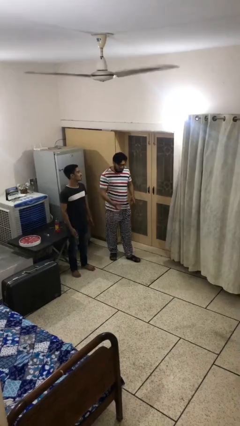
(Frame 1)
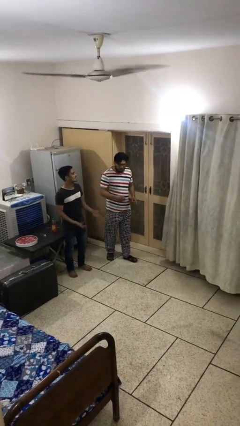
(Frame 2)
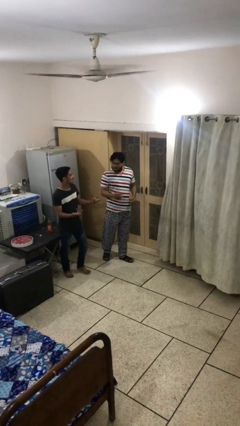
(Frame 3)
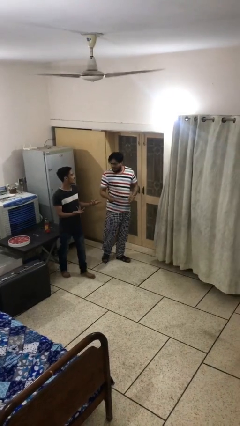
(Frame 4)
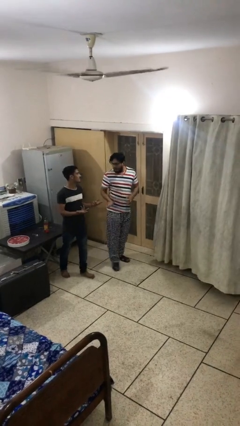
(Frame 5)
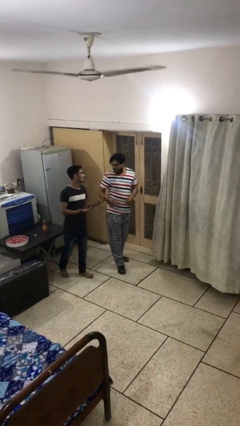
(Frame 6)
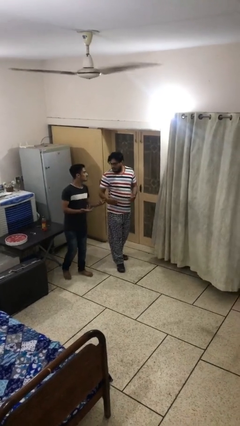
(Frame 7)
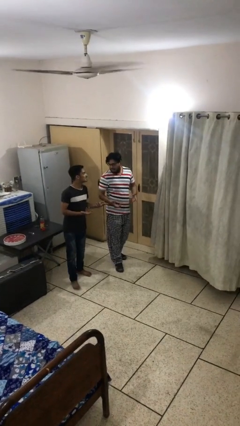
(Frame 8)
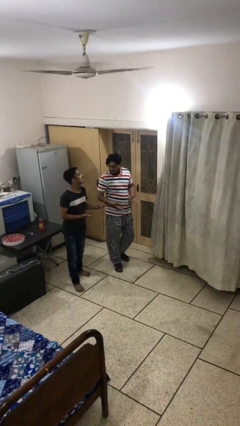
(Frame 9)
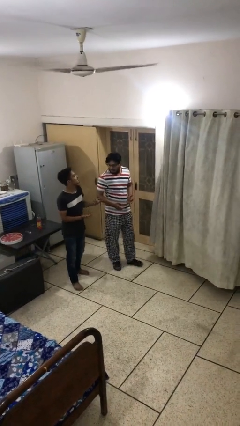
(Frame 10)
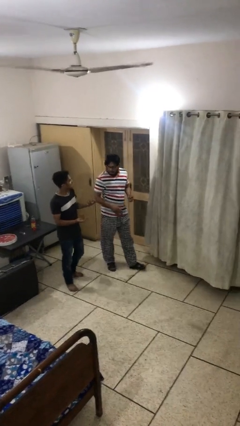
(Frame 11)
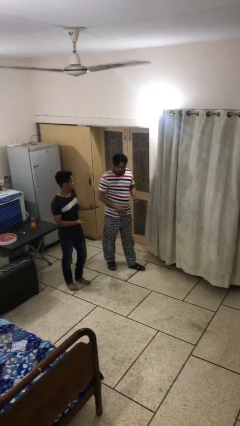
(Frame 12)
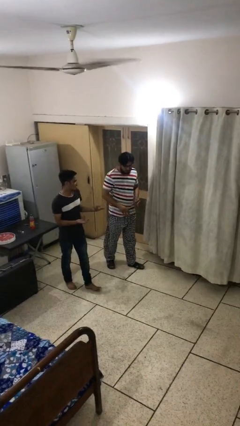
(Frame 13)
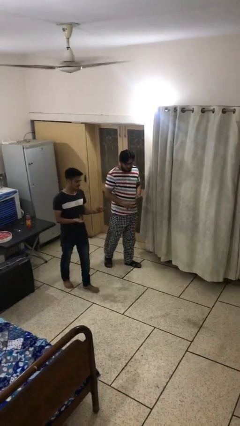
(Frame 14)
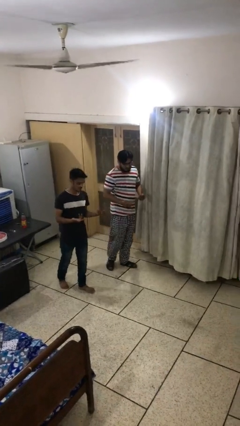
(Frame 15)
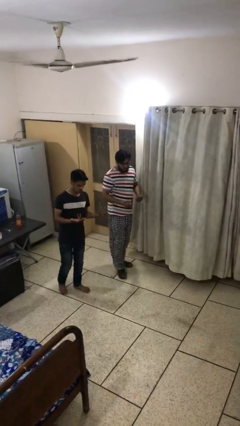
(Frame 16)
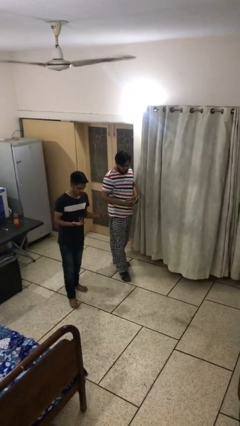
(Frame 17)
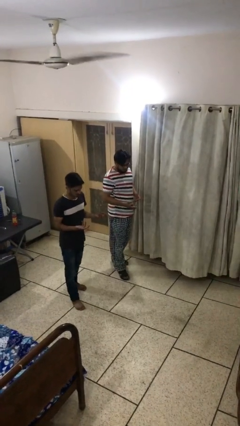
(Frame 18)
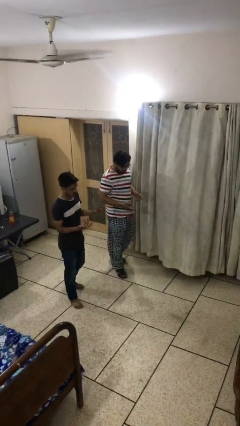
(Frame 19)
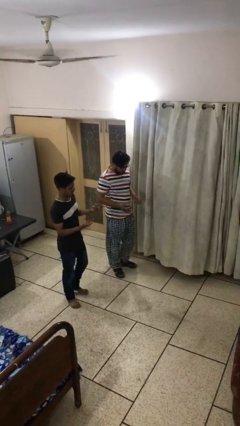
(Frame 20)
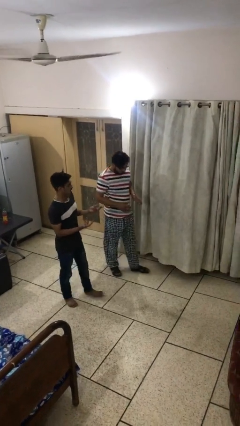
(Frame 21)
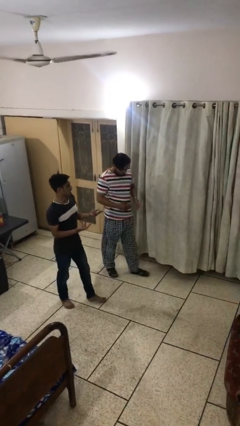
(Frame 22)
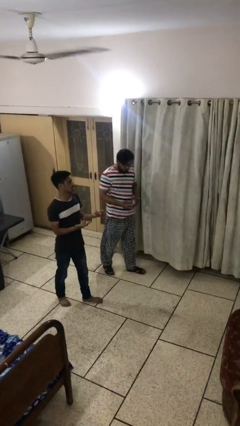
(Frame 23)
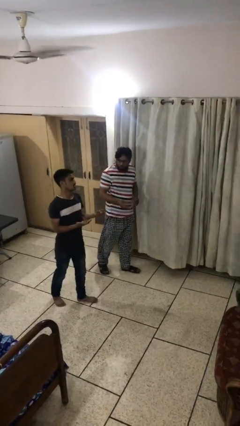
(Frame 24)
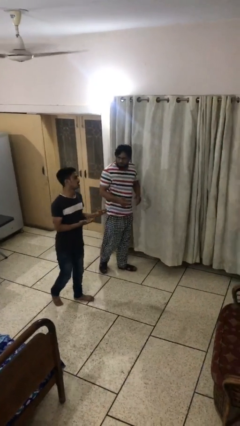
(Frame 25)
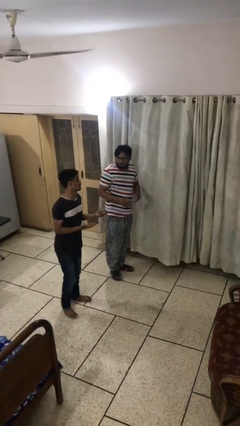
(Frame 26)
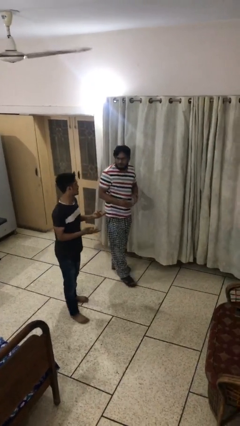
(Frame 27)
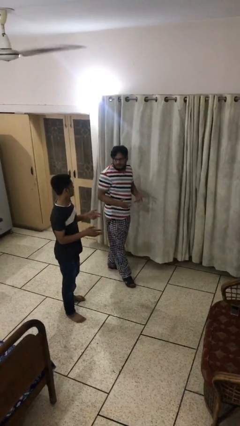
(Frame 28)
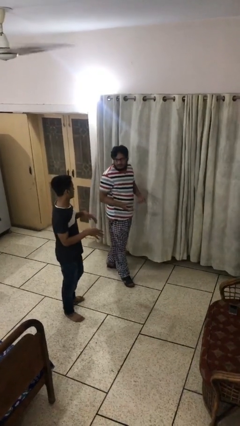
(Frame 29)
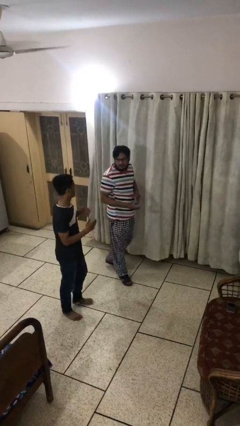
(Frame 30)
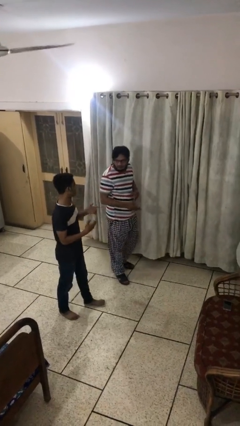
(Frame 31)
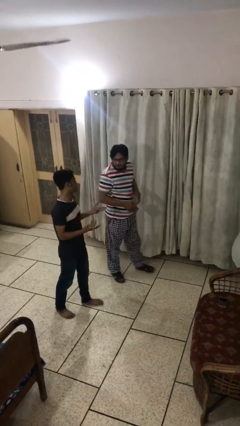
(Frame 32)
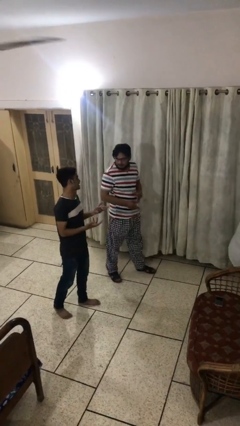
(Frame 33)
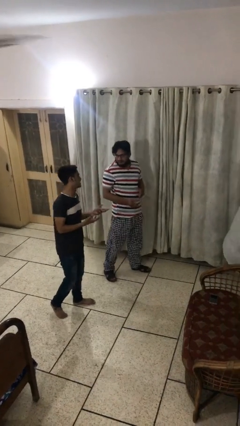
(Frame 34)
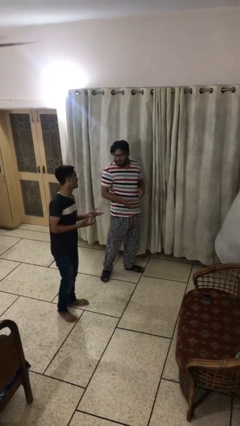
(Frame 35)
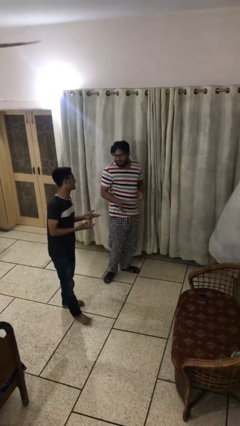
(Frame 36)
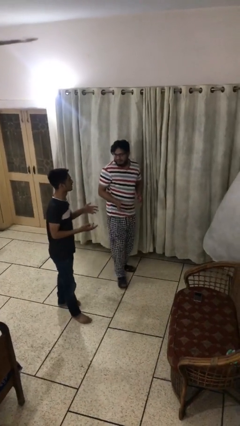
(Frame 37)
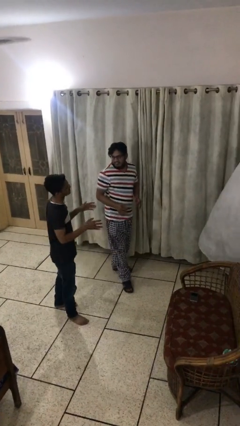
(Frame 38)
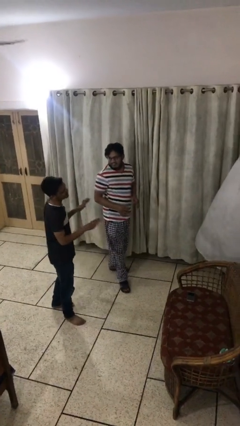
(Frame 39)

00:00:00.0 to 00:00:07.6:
person talks to person

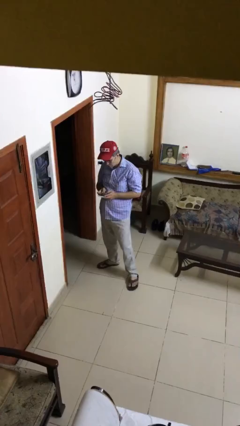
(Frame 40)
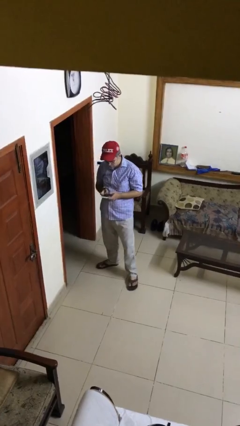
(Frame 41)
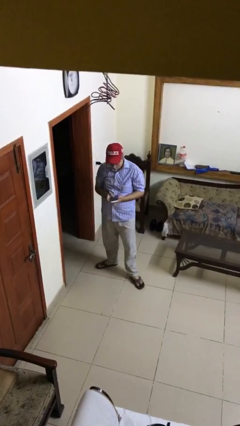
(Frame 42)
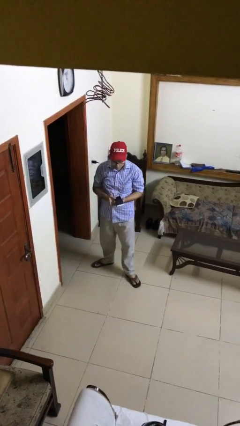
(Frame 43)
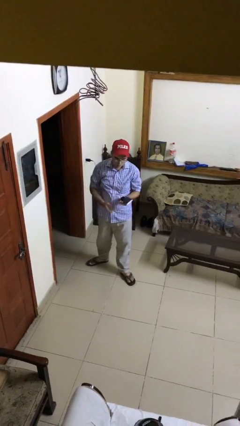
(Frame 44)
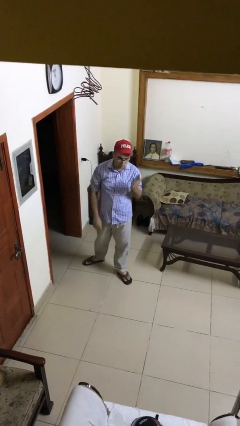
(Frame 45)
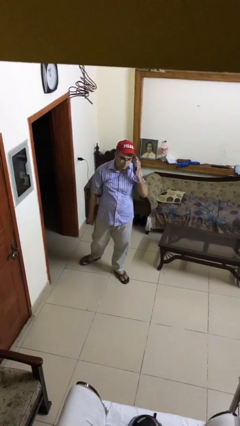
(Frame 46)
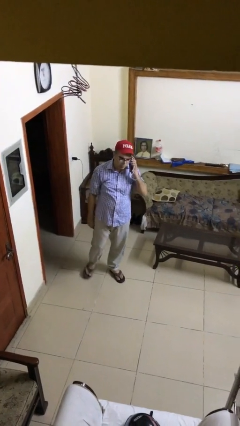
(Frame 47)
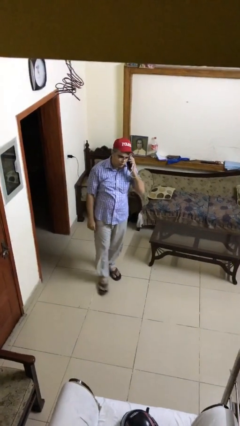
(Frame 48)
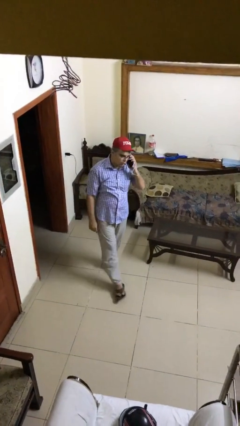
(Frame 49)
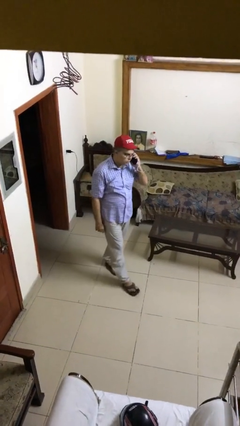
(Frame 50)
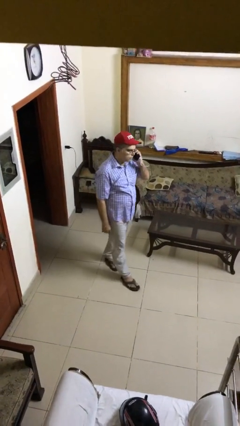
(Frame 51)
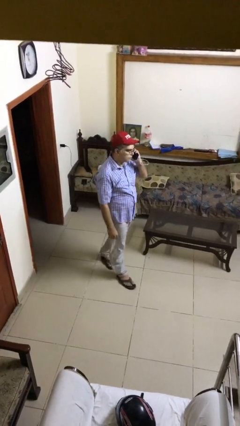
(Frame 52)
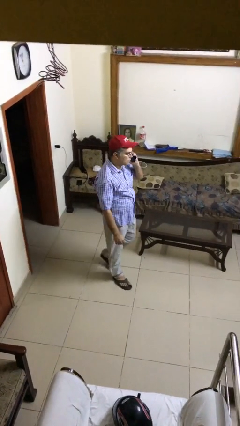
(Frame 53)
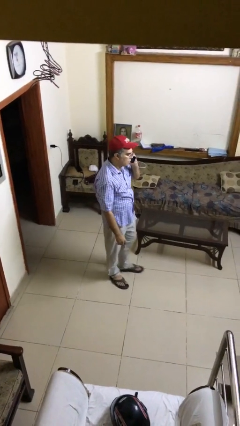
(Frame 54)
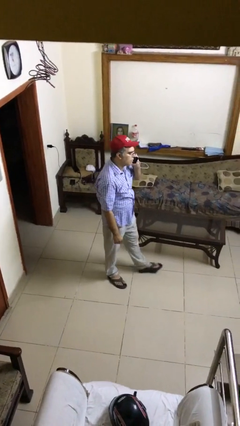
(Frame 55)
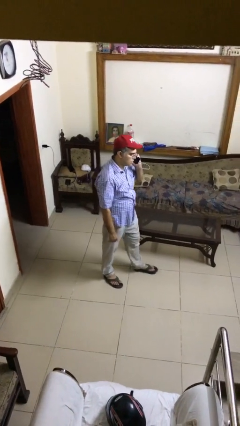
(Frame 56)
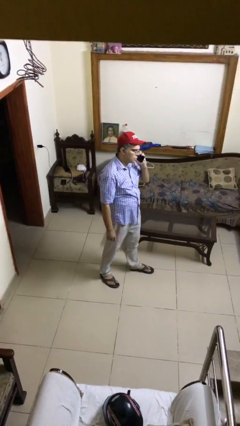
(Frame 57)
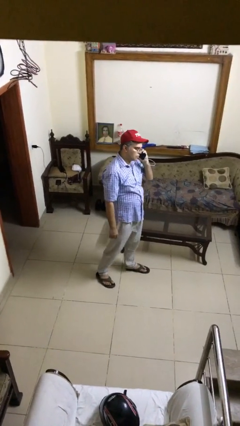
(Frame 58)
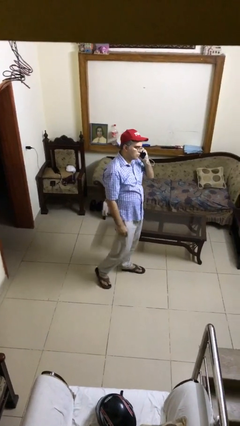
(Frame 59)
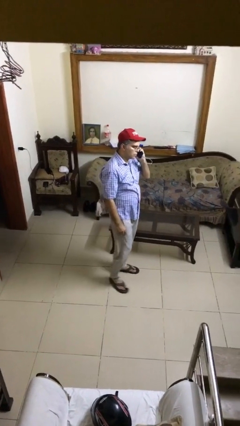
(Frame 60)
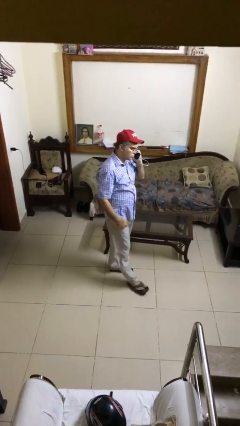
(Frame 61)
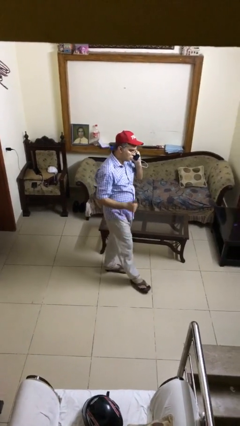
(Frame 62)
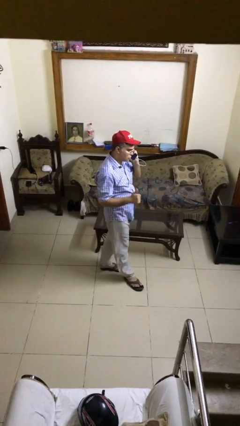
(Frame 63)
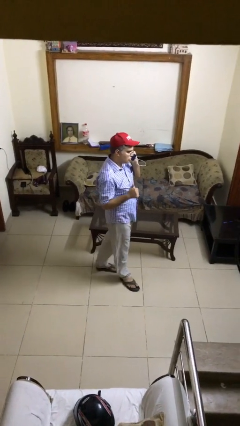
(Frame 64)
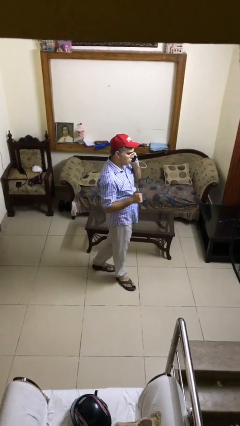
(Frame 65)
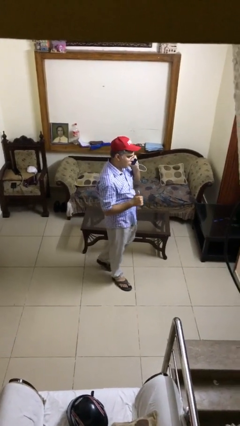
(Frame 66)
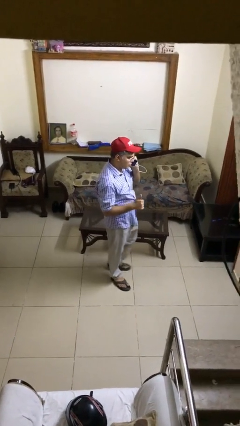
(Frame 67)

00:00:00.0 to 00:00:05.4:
person talks on phone

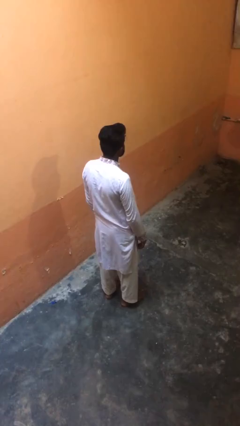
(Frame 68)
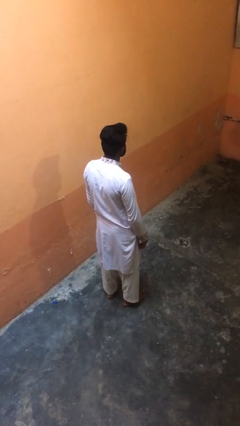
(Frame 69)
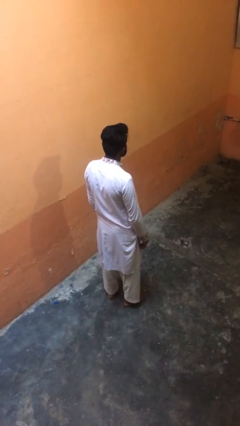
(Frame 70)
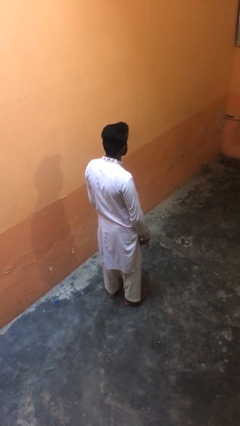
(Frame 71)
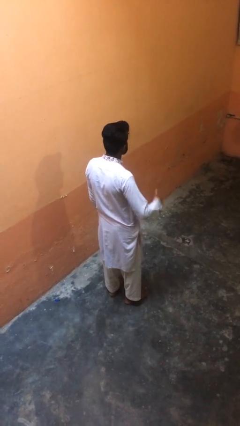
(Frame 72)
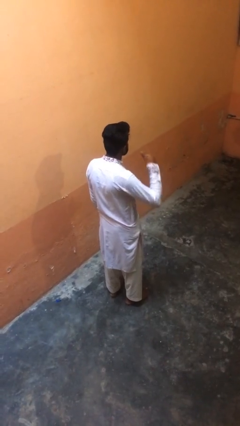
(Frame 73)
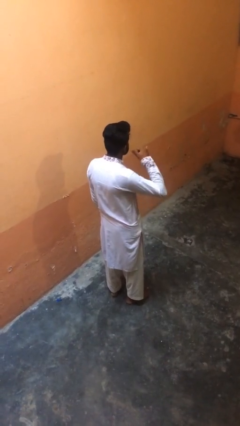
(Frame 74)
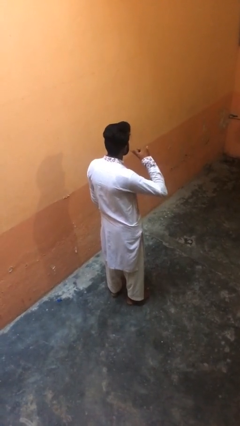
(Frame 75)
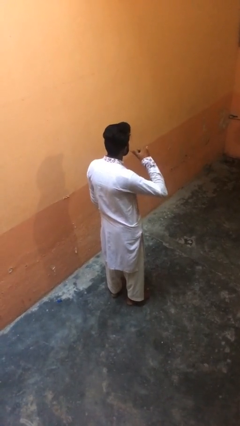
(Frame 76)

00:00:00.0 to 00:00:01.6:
person gestures call me

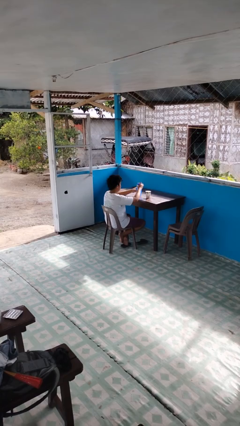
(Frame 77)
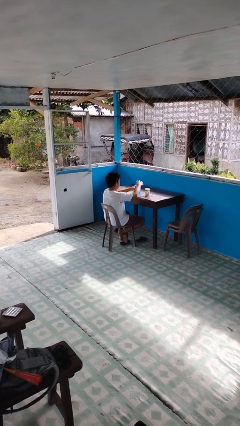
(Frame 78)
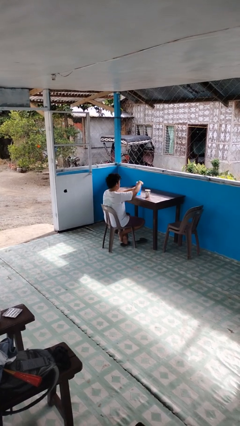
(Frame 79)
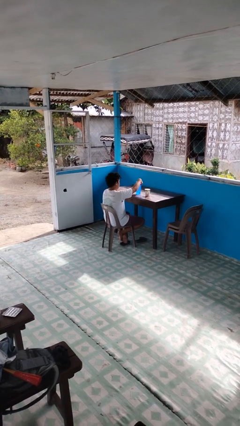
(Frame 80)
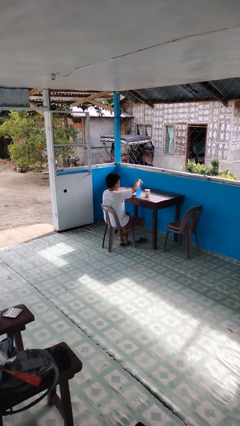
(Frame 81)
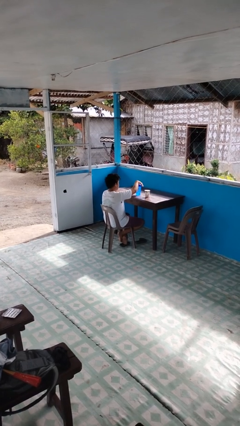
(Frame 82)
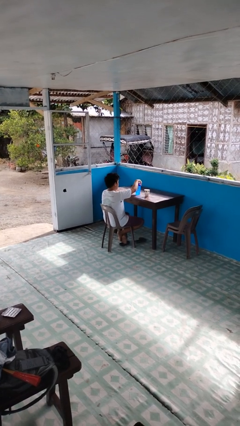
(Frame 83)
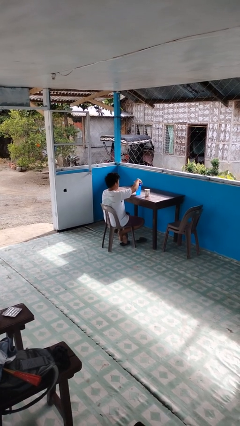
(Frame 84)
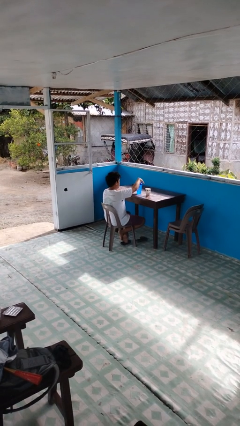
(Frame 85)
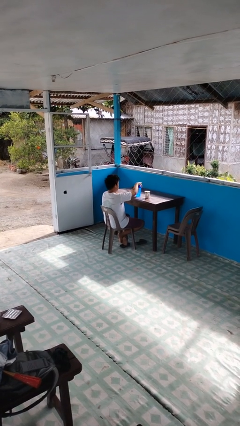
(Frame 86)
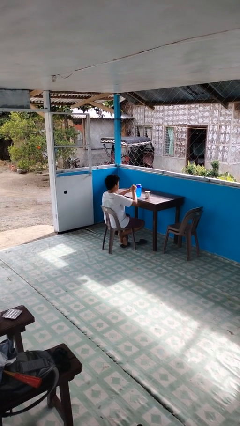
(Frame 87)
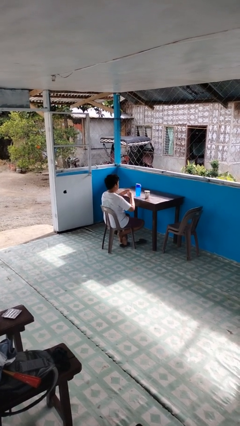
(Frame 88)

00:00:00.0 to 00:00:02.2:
person screws lid to bottle

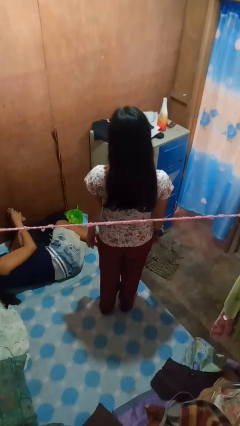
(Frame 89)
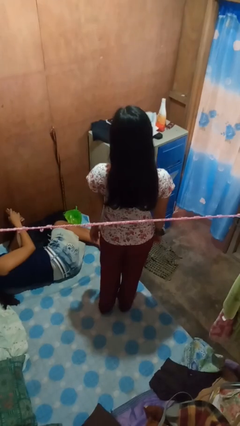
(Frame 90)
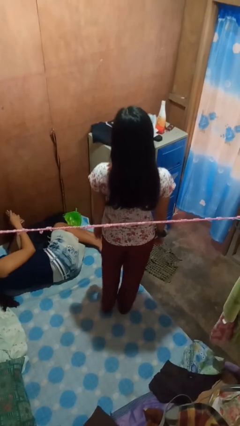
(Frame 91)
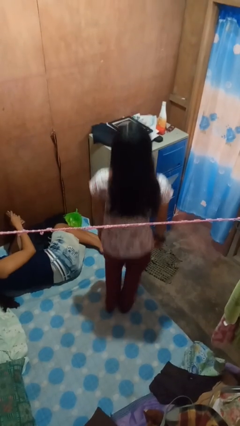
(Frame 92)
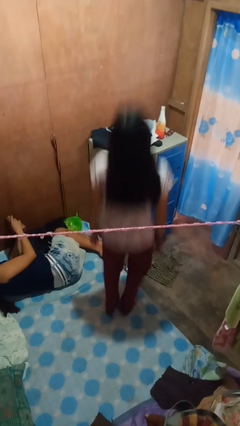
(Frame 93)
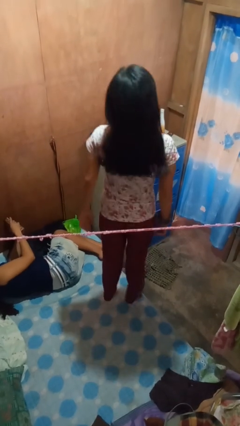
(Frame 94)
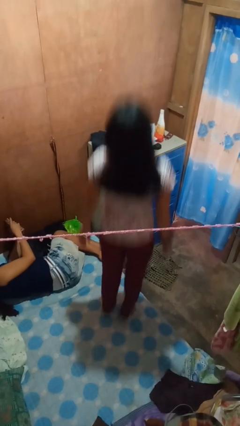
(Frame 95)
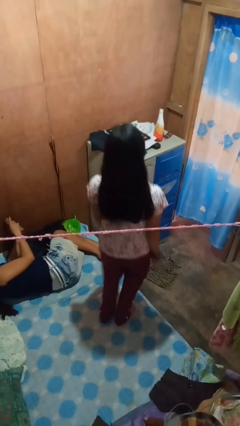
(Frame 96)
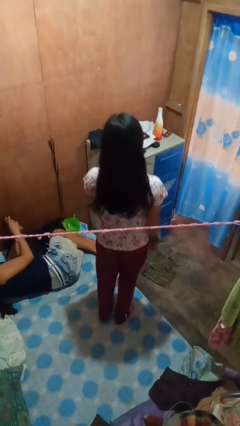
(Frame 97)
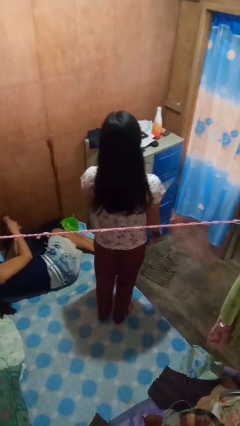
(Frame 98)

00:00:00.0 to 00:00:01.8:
person jumps on bed
